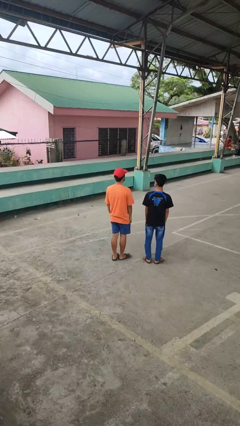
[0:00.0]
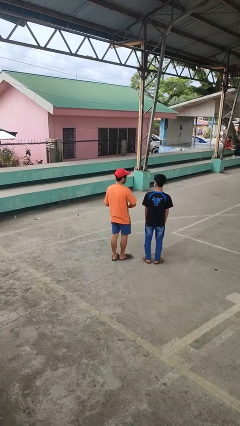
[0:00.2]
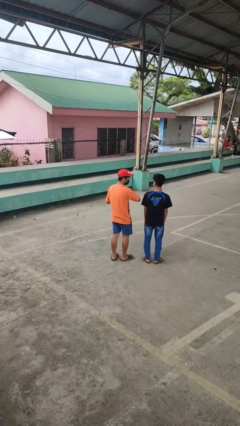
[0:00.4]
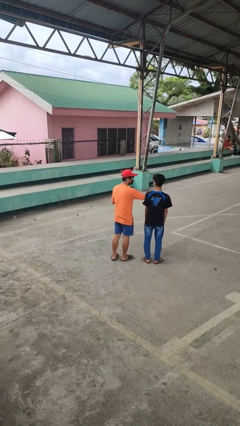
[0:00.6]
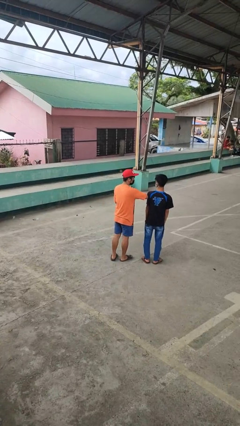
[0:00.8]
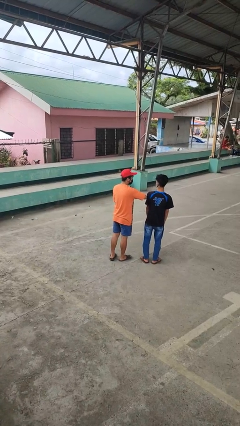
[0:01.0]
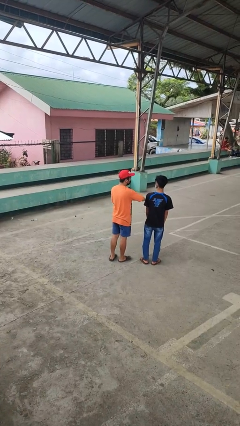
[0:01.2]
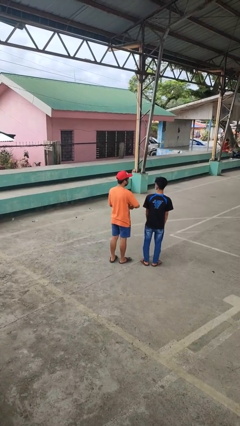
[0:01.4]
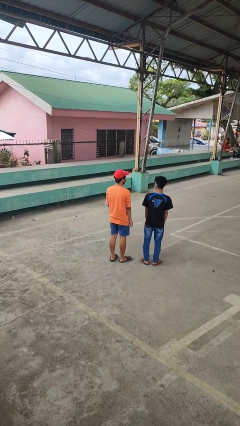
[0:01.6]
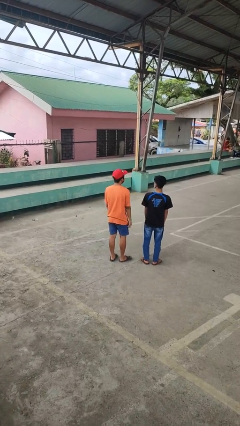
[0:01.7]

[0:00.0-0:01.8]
person nudges person with elbow

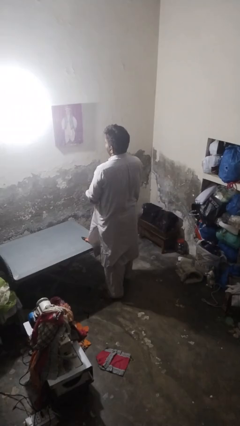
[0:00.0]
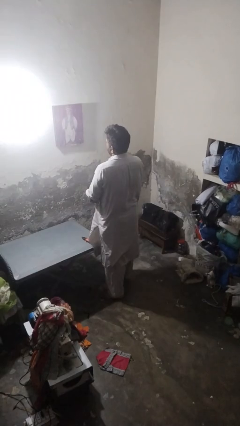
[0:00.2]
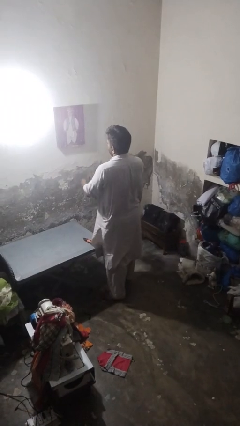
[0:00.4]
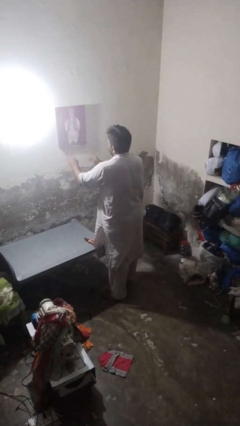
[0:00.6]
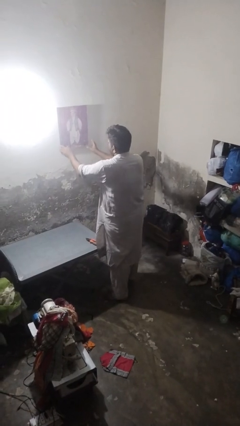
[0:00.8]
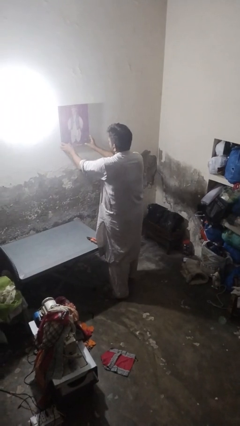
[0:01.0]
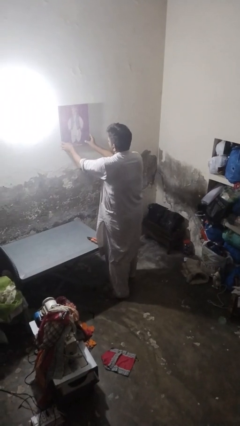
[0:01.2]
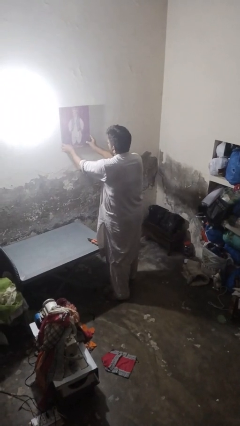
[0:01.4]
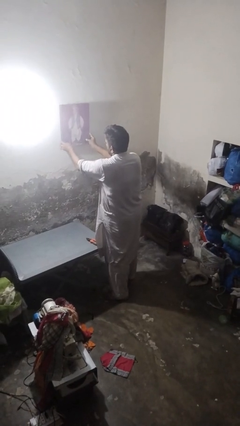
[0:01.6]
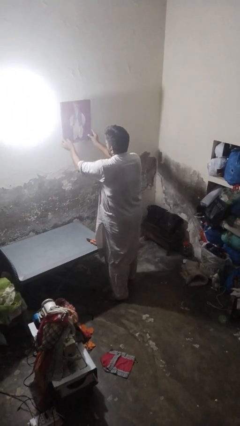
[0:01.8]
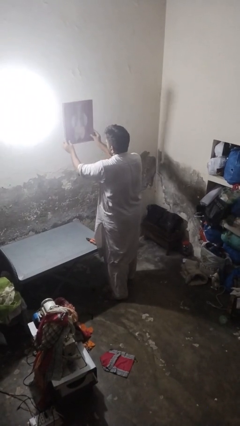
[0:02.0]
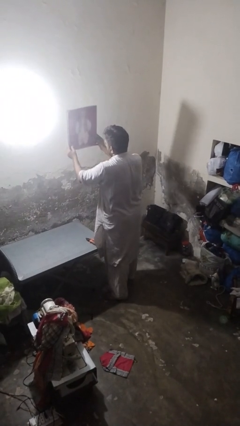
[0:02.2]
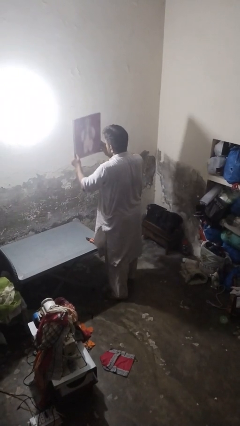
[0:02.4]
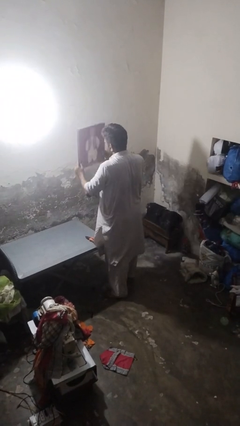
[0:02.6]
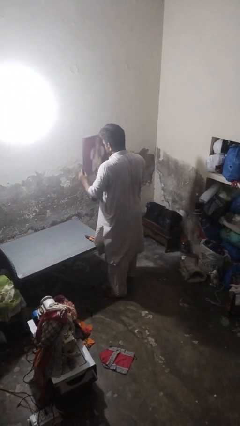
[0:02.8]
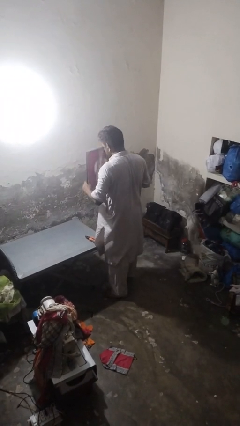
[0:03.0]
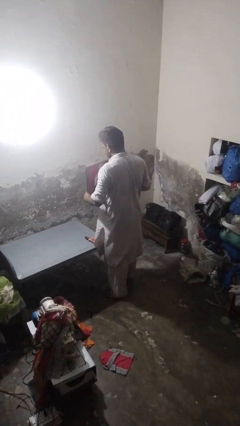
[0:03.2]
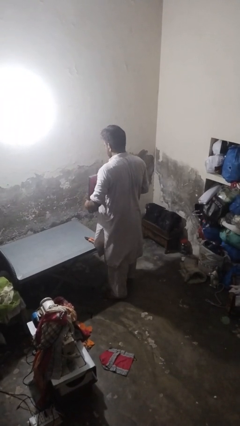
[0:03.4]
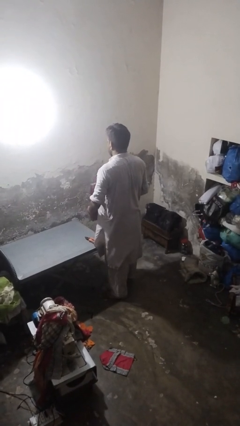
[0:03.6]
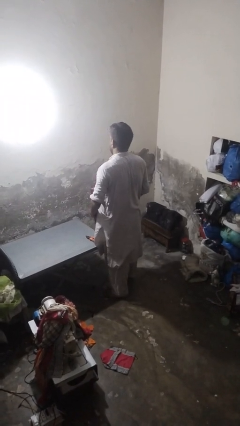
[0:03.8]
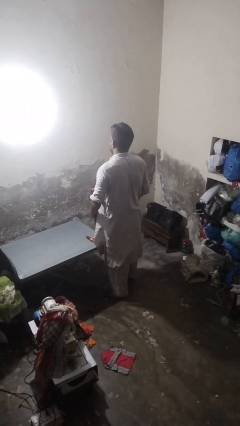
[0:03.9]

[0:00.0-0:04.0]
person takes down picture frame

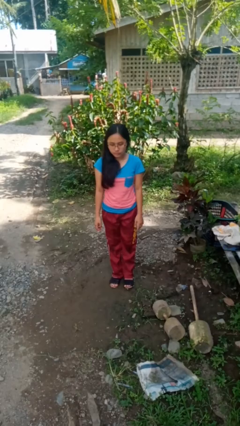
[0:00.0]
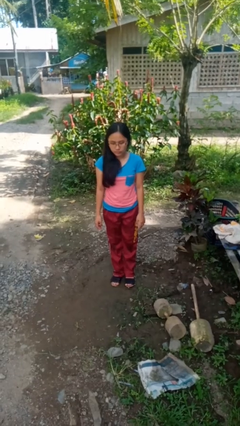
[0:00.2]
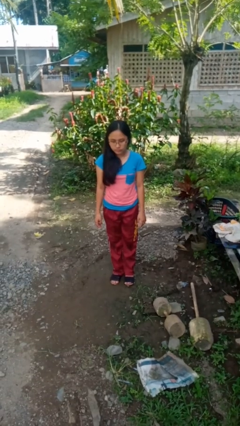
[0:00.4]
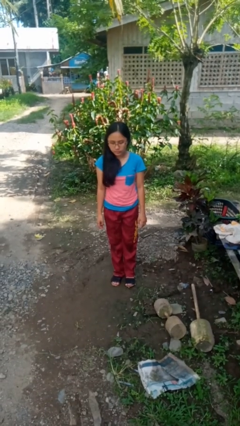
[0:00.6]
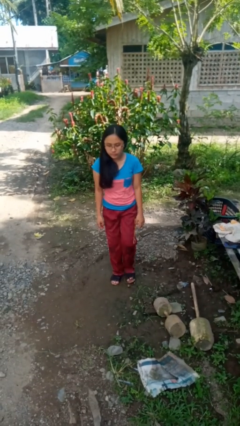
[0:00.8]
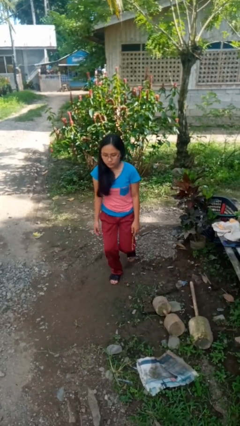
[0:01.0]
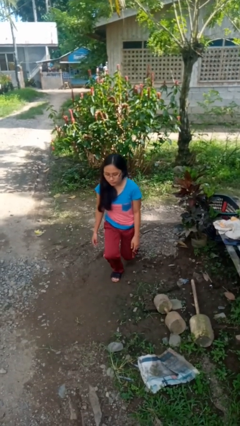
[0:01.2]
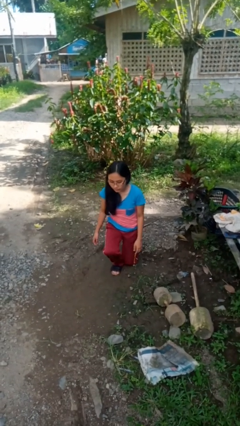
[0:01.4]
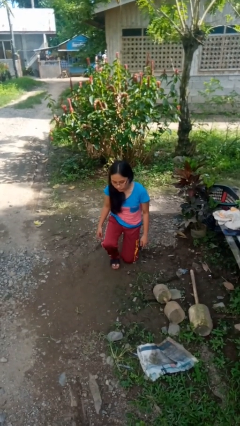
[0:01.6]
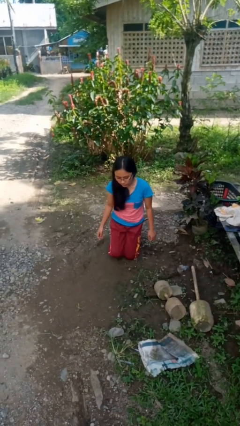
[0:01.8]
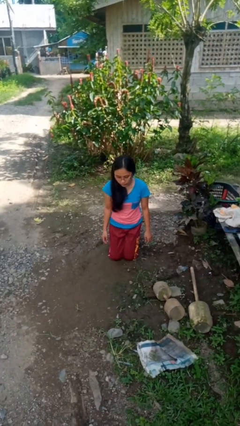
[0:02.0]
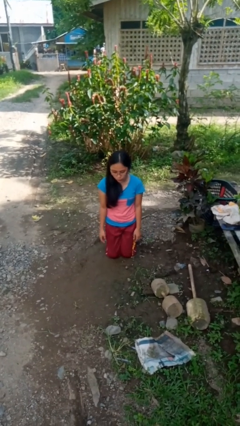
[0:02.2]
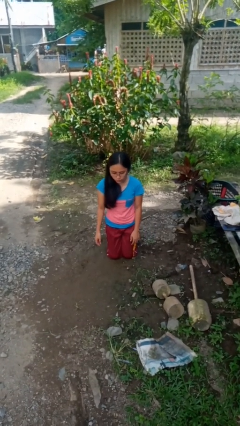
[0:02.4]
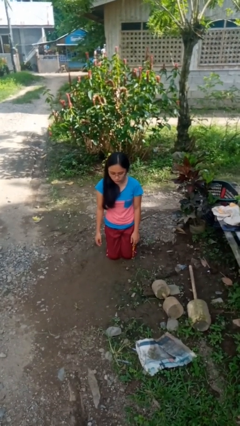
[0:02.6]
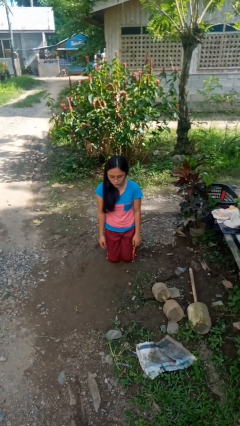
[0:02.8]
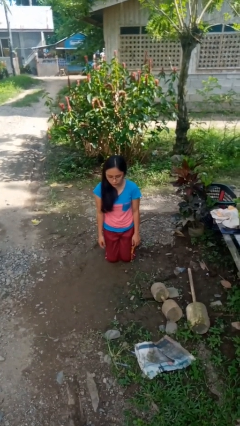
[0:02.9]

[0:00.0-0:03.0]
person kneels

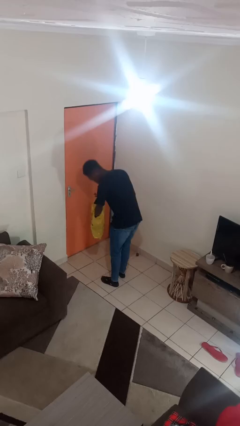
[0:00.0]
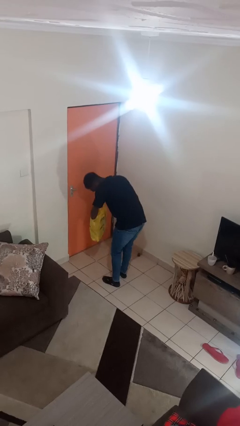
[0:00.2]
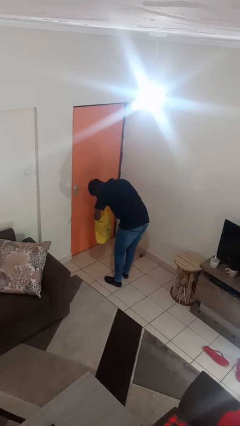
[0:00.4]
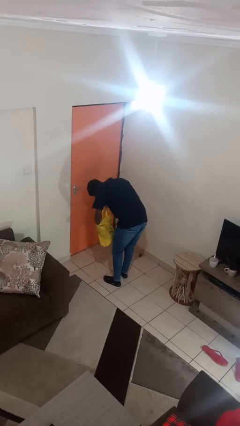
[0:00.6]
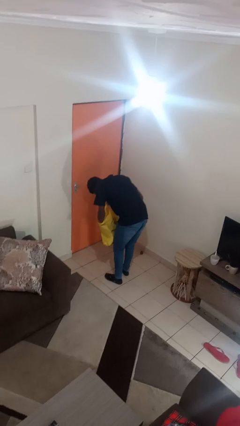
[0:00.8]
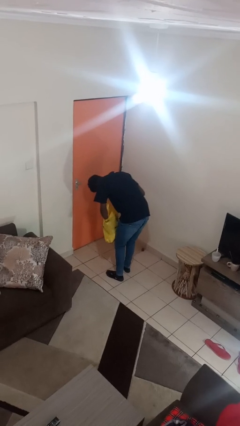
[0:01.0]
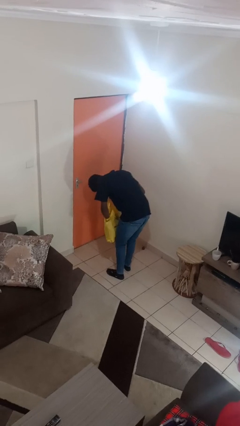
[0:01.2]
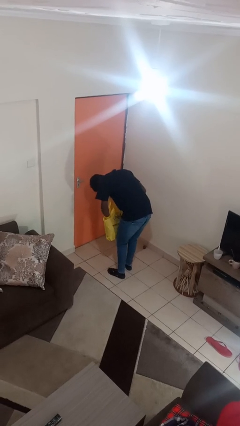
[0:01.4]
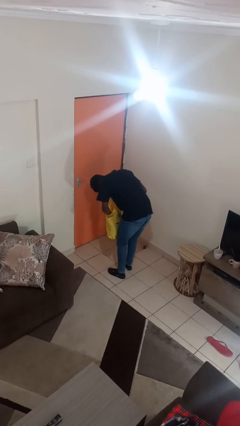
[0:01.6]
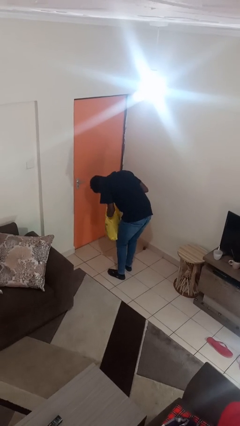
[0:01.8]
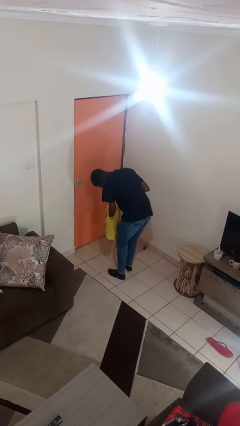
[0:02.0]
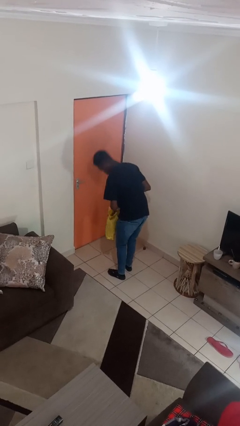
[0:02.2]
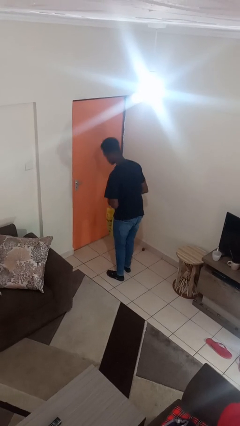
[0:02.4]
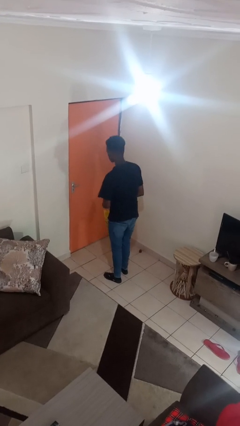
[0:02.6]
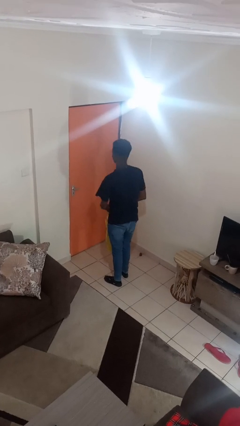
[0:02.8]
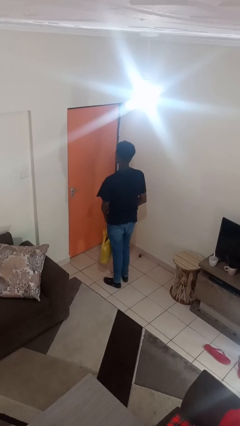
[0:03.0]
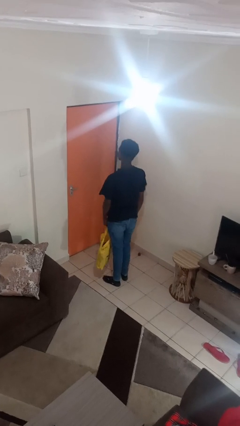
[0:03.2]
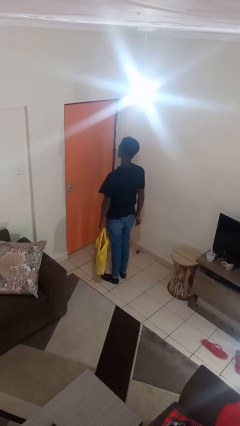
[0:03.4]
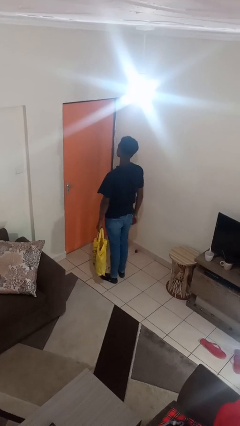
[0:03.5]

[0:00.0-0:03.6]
person searches in bag

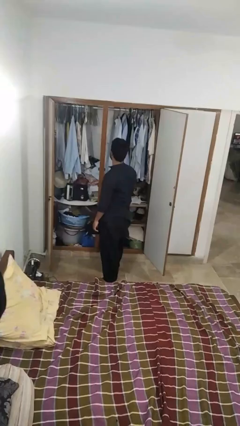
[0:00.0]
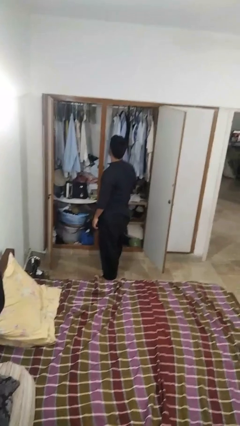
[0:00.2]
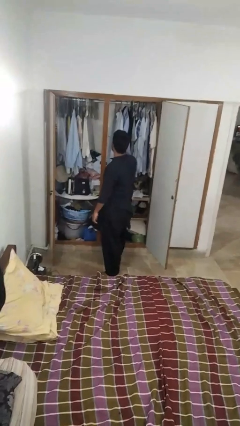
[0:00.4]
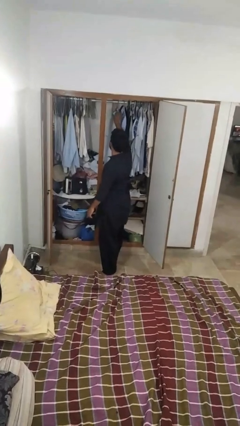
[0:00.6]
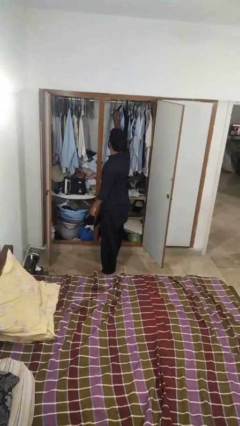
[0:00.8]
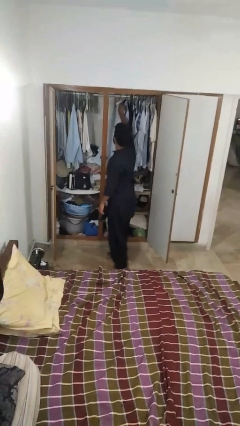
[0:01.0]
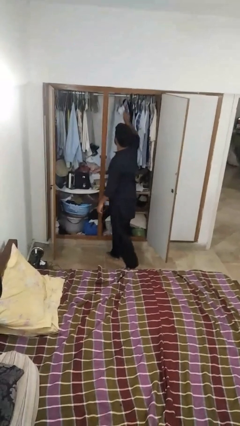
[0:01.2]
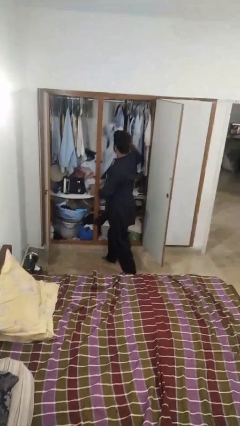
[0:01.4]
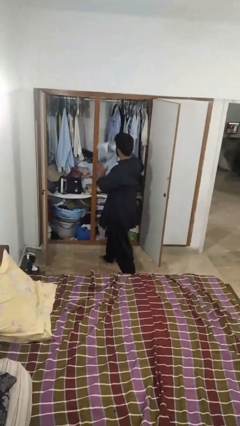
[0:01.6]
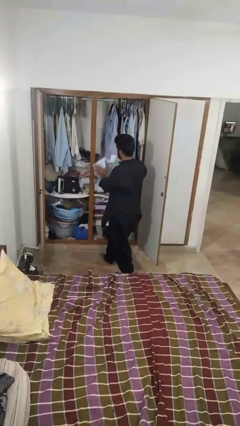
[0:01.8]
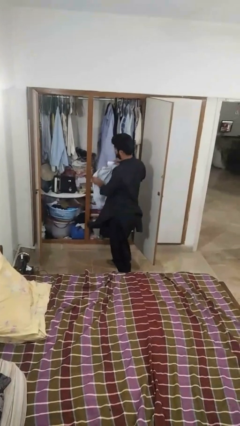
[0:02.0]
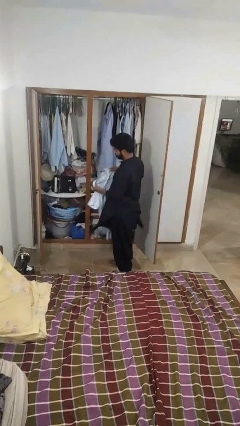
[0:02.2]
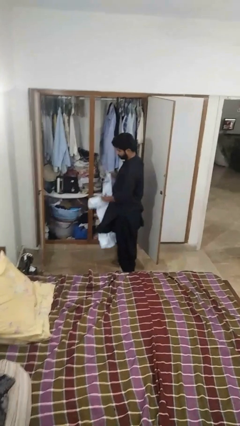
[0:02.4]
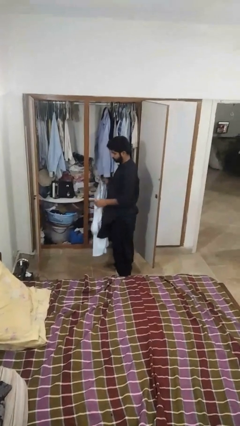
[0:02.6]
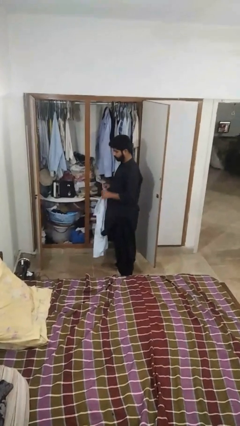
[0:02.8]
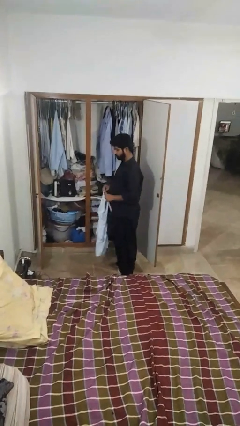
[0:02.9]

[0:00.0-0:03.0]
person takes clothes from dresser

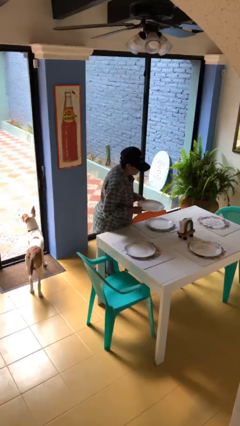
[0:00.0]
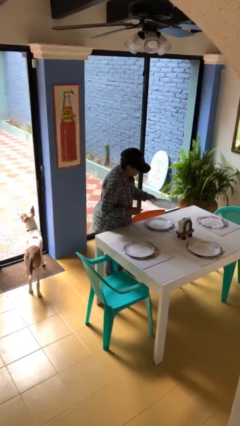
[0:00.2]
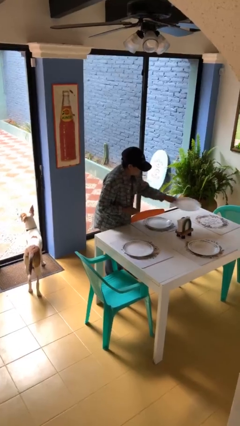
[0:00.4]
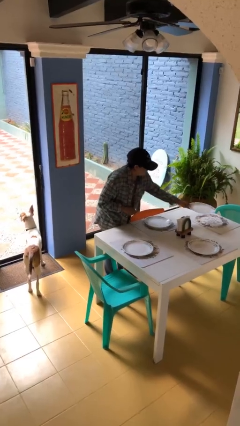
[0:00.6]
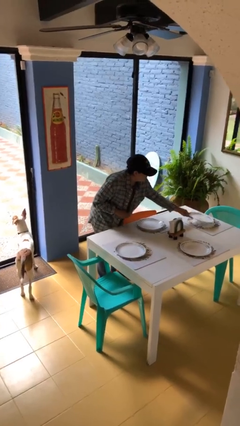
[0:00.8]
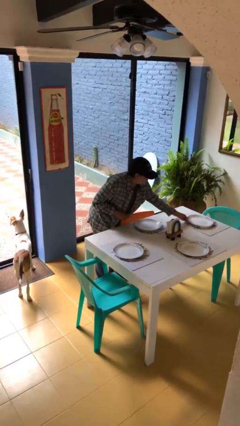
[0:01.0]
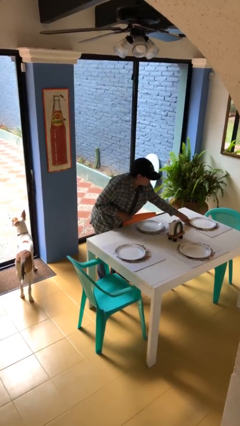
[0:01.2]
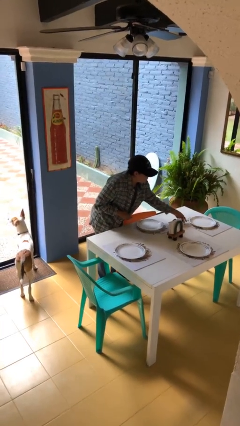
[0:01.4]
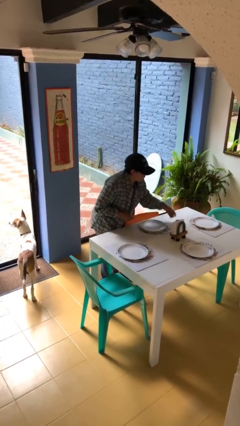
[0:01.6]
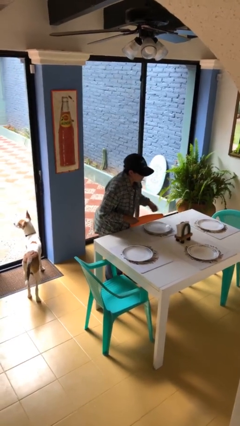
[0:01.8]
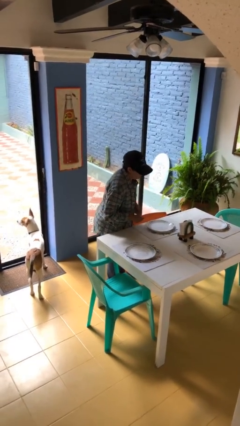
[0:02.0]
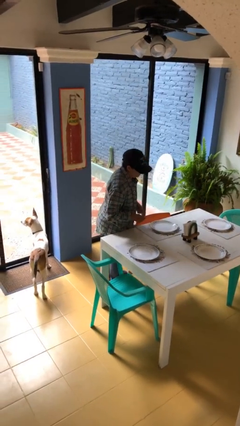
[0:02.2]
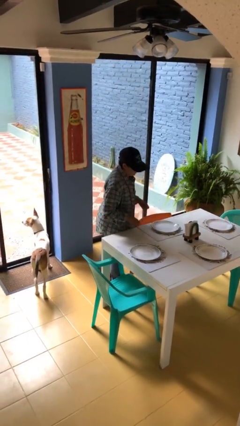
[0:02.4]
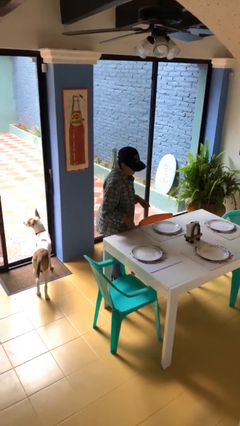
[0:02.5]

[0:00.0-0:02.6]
person sets table
